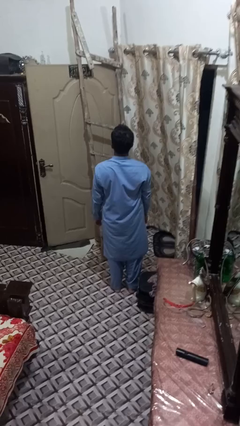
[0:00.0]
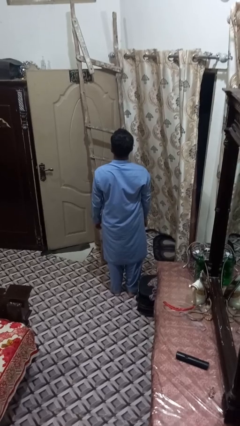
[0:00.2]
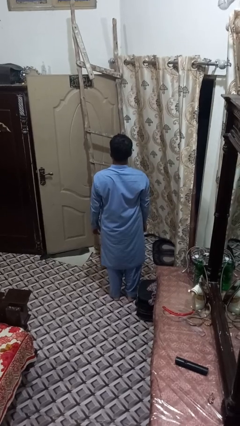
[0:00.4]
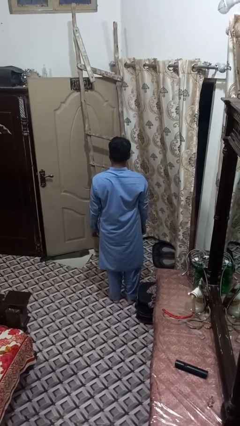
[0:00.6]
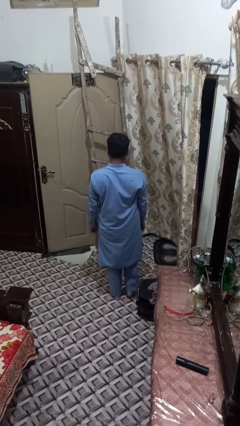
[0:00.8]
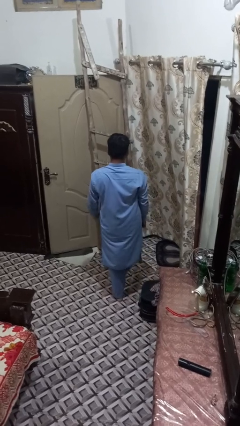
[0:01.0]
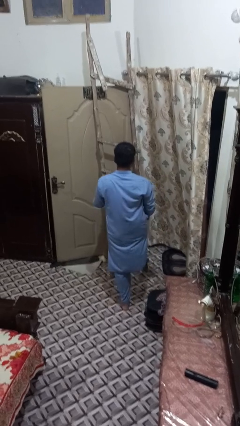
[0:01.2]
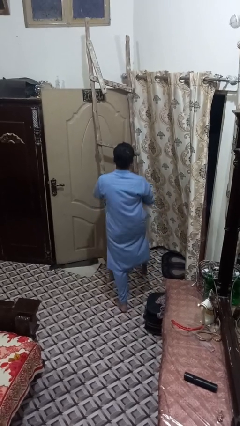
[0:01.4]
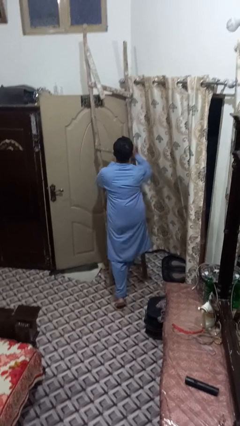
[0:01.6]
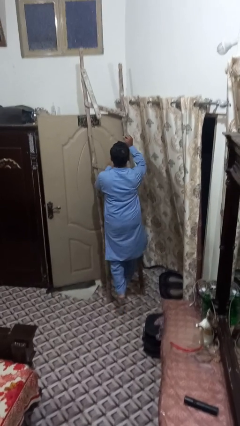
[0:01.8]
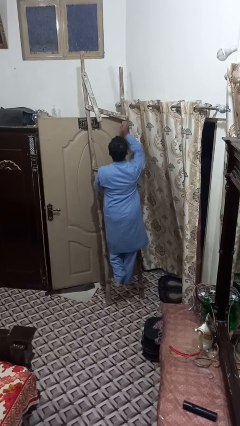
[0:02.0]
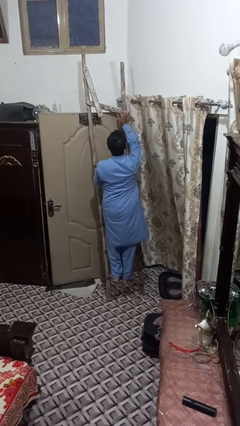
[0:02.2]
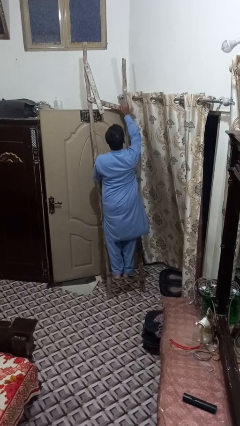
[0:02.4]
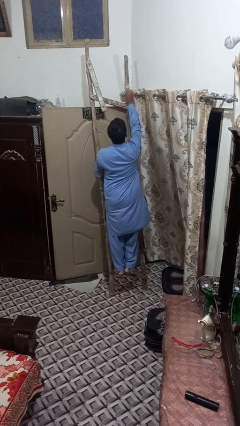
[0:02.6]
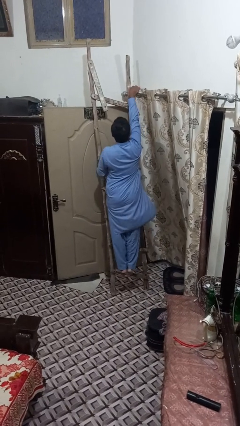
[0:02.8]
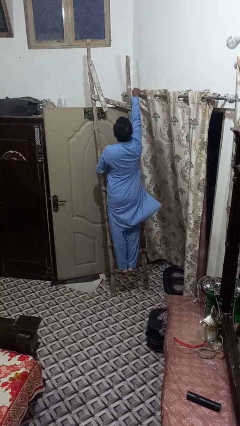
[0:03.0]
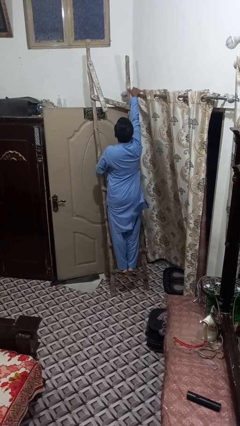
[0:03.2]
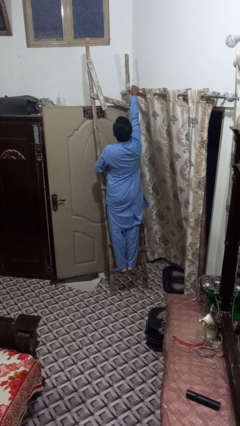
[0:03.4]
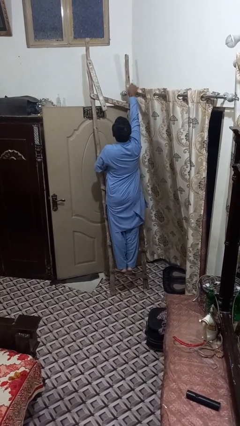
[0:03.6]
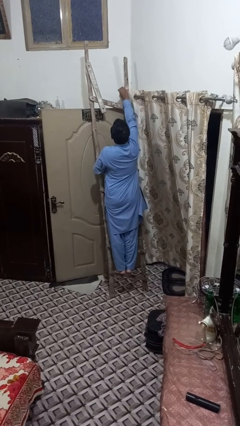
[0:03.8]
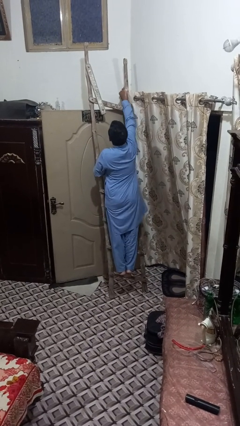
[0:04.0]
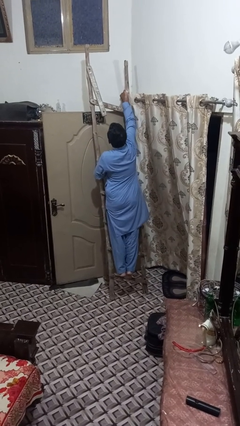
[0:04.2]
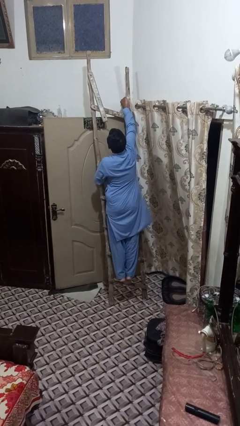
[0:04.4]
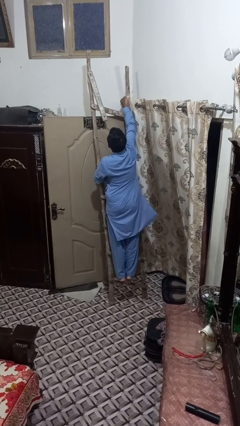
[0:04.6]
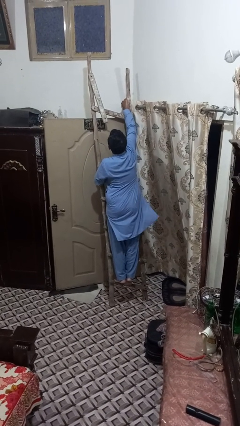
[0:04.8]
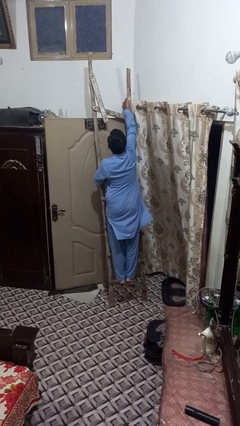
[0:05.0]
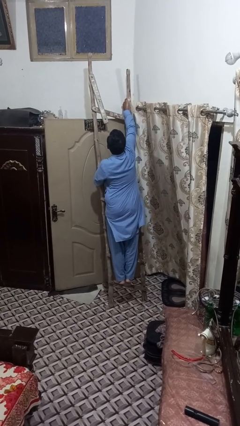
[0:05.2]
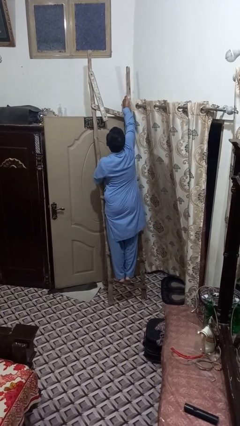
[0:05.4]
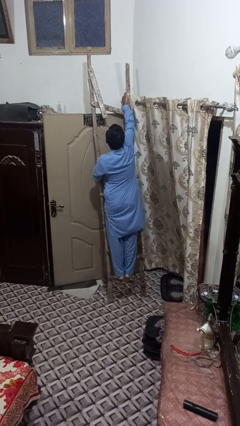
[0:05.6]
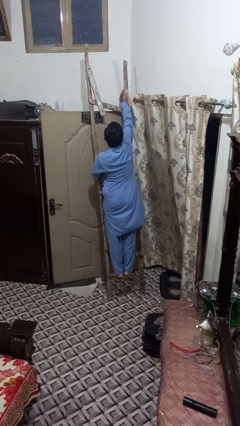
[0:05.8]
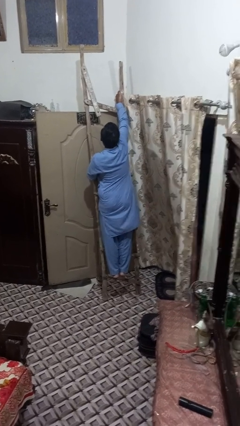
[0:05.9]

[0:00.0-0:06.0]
person climbs up ladder

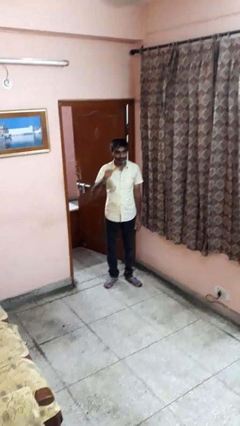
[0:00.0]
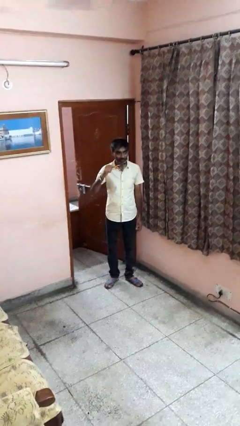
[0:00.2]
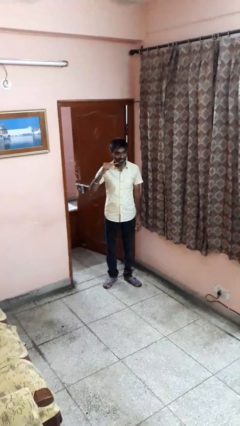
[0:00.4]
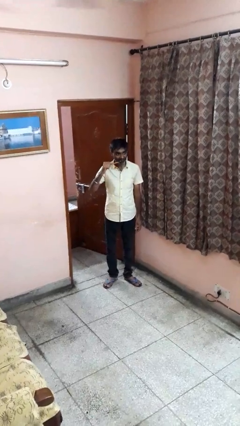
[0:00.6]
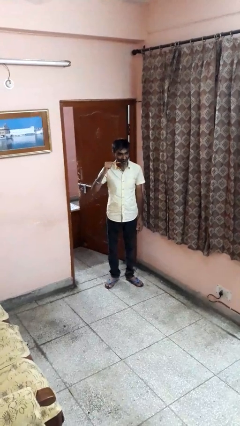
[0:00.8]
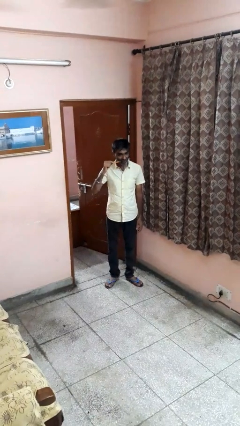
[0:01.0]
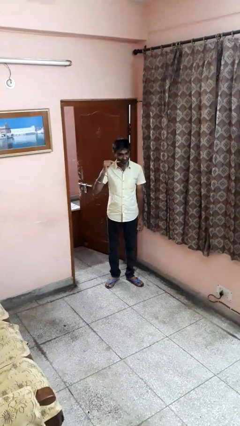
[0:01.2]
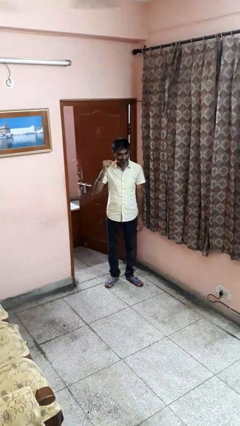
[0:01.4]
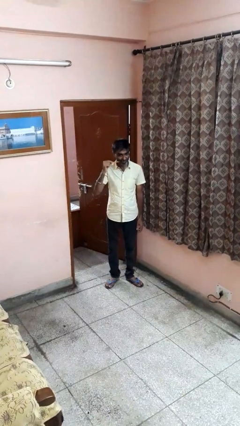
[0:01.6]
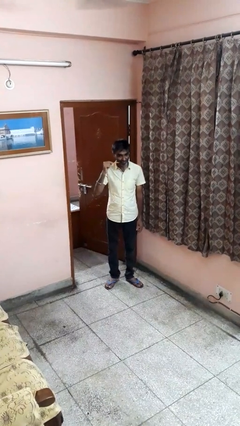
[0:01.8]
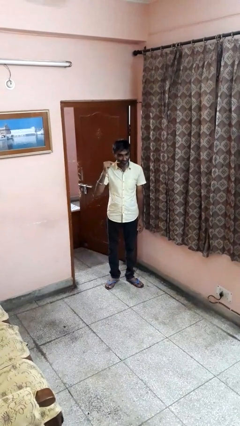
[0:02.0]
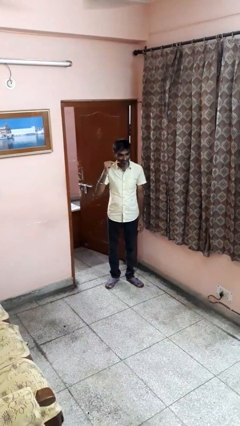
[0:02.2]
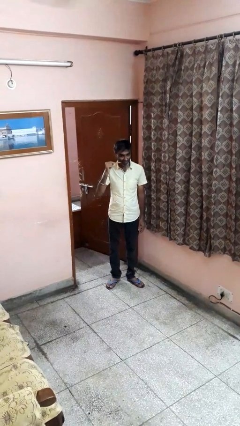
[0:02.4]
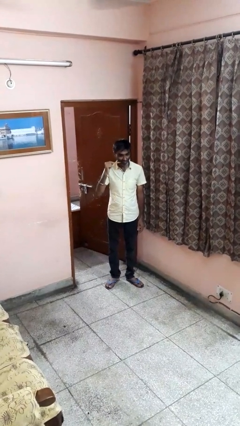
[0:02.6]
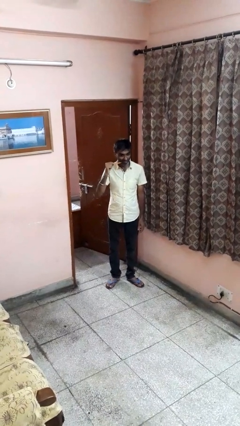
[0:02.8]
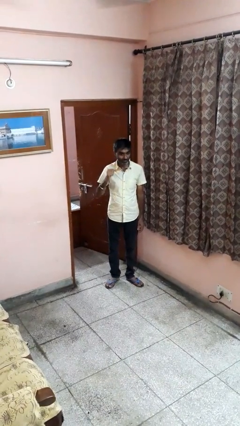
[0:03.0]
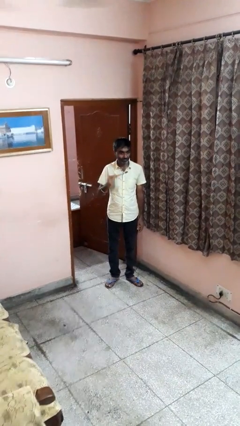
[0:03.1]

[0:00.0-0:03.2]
person brushes teeth

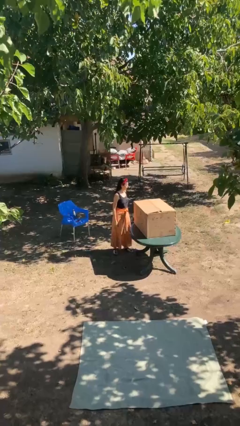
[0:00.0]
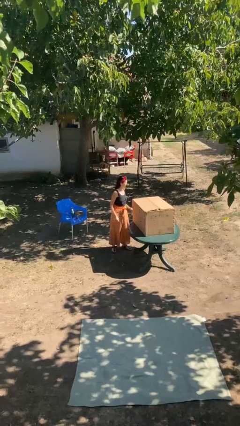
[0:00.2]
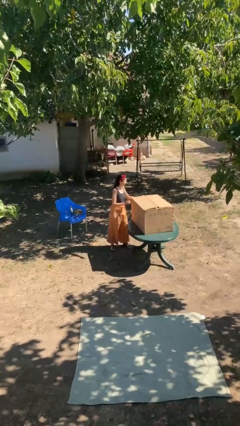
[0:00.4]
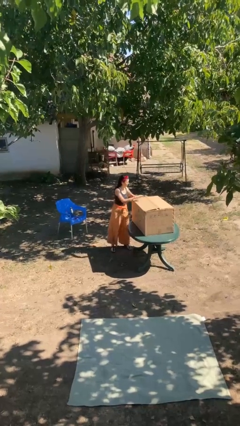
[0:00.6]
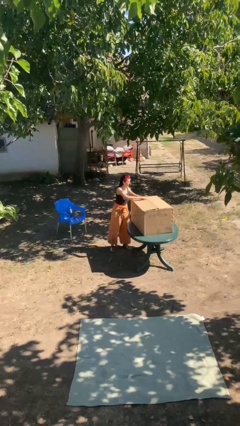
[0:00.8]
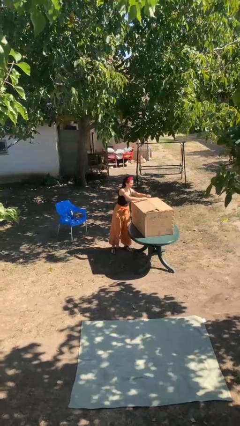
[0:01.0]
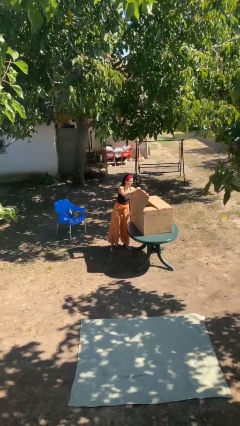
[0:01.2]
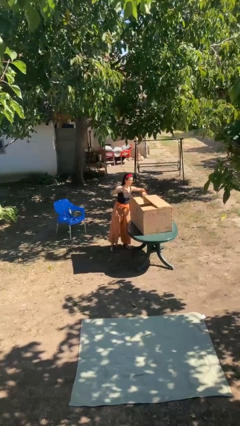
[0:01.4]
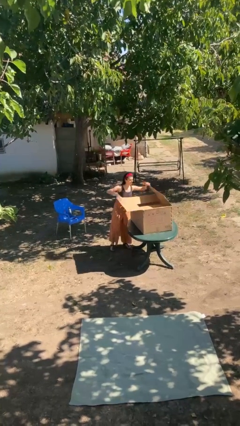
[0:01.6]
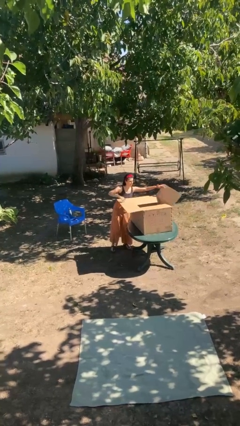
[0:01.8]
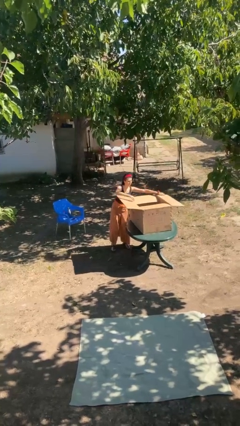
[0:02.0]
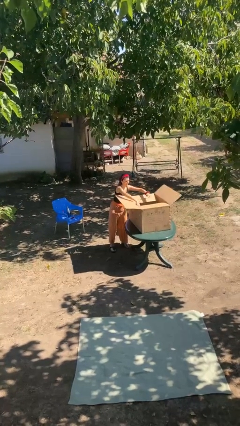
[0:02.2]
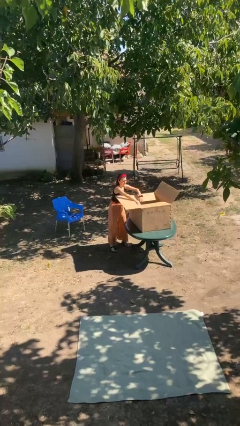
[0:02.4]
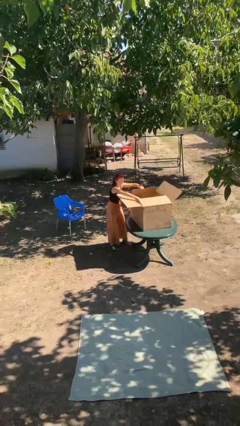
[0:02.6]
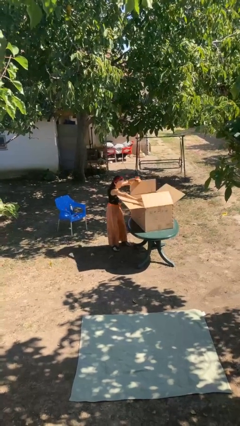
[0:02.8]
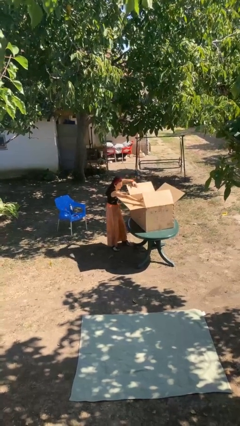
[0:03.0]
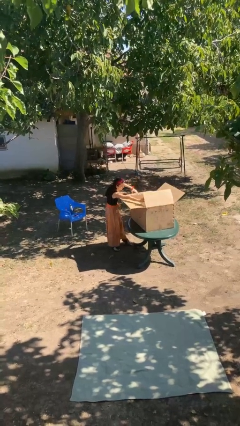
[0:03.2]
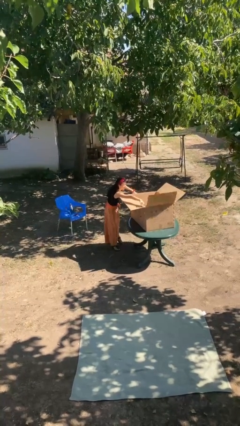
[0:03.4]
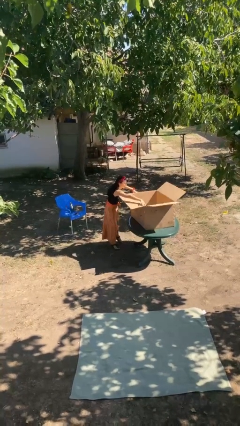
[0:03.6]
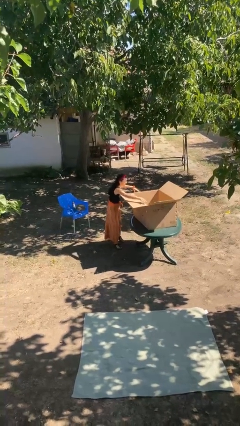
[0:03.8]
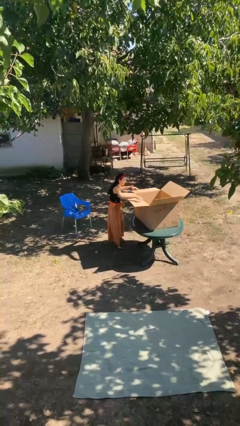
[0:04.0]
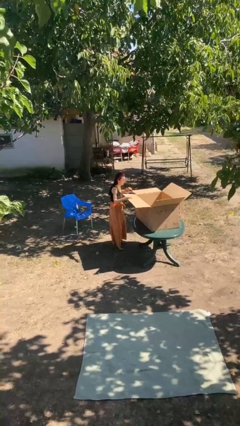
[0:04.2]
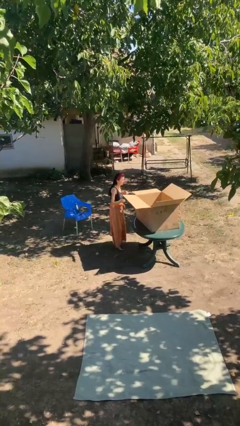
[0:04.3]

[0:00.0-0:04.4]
person opens box

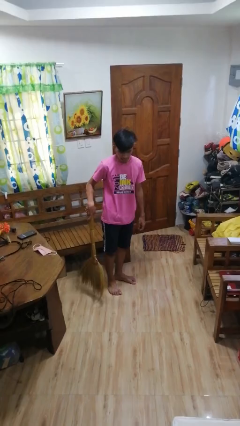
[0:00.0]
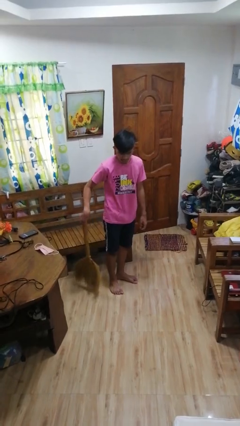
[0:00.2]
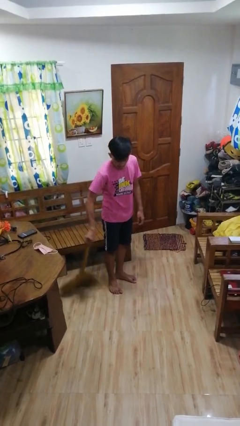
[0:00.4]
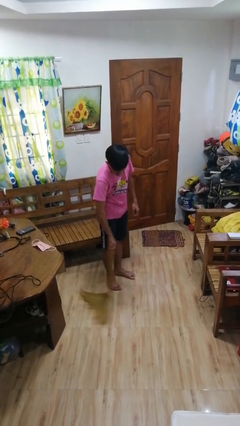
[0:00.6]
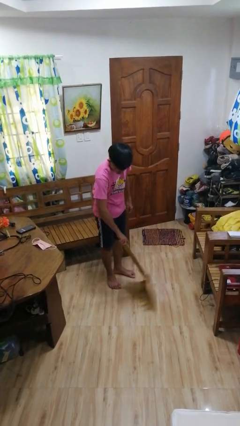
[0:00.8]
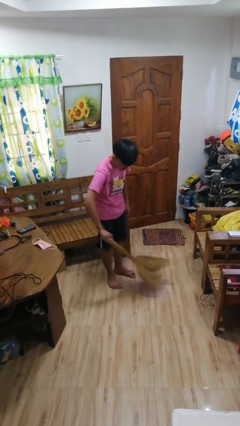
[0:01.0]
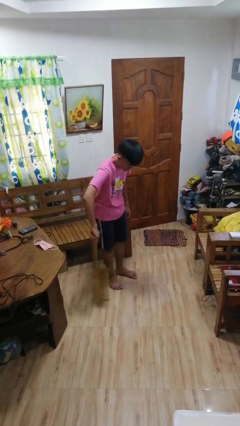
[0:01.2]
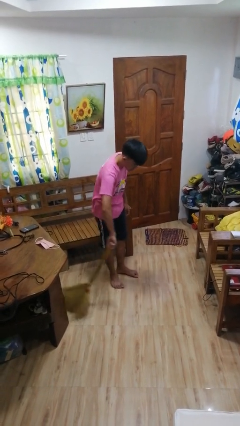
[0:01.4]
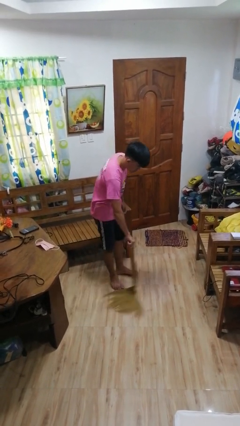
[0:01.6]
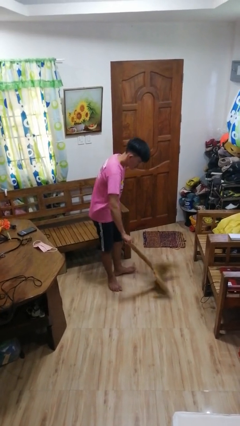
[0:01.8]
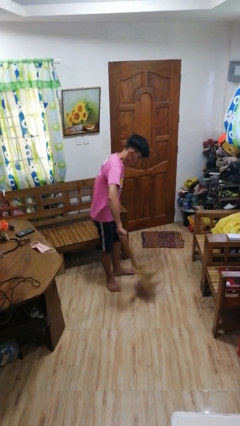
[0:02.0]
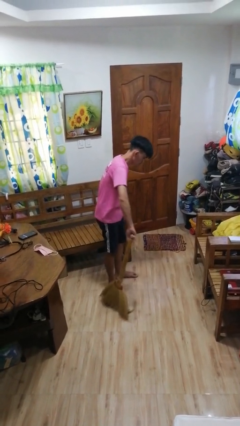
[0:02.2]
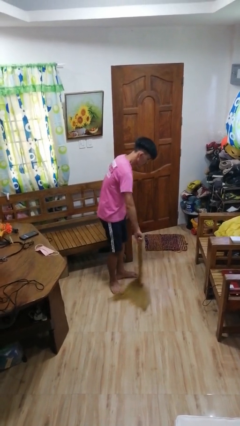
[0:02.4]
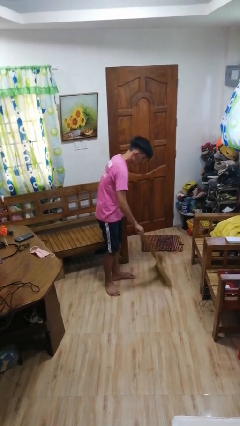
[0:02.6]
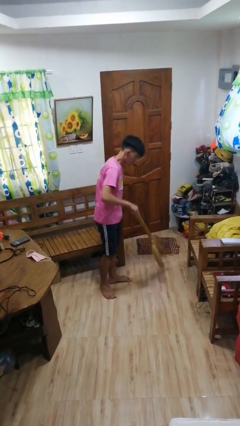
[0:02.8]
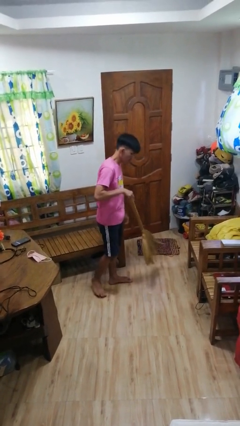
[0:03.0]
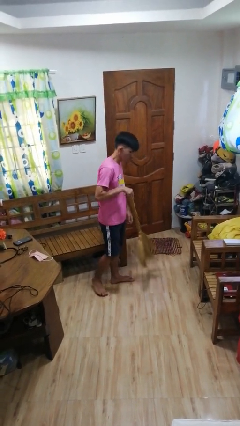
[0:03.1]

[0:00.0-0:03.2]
person sweeps floor

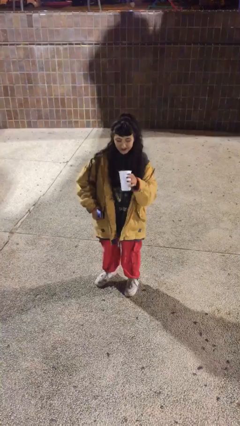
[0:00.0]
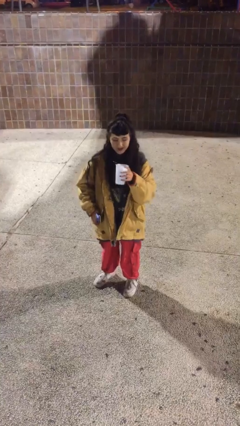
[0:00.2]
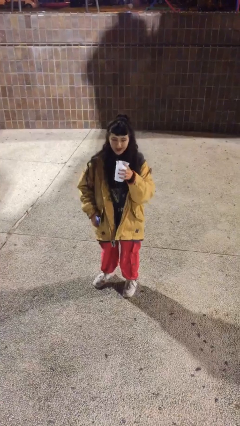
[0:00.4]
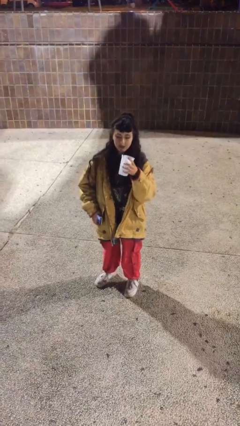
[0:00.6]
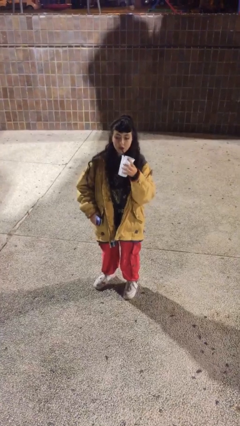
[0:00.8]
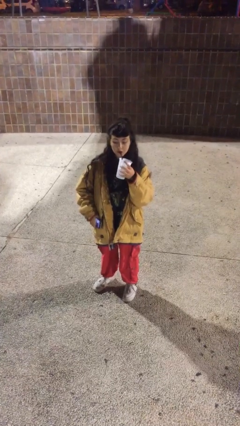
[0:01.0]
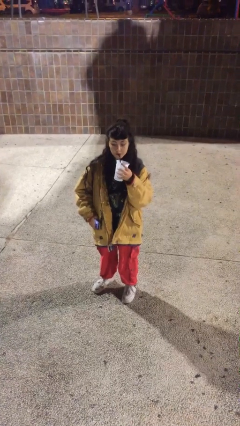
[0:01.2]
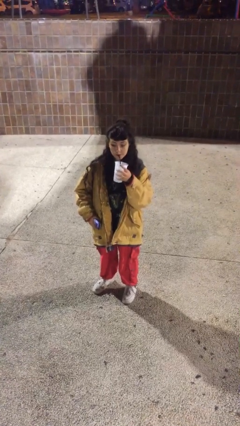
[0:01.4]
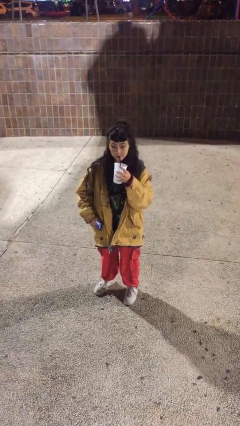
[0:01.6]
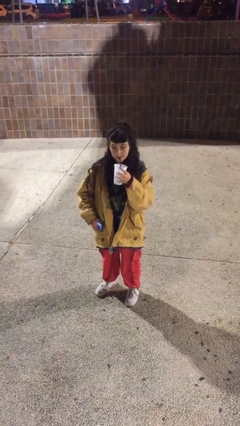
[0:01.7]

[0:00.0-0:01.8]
person drinks from straw
